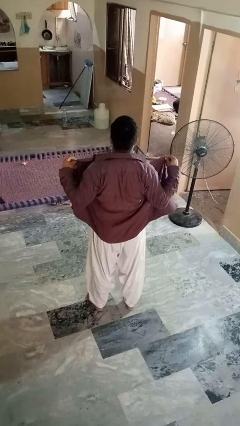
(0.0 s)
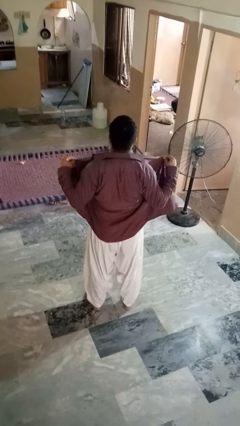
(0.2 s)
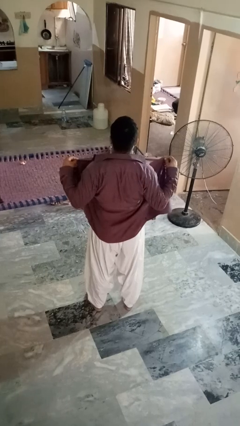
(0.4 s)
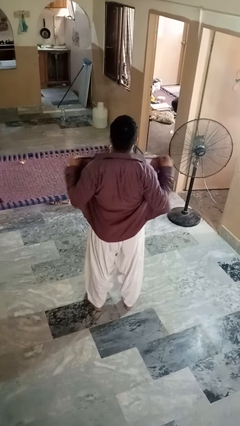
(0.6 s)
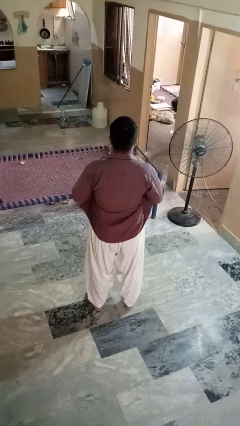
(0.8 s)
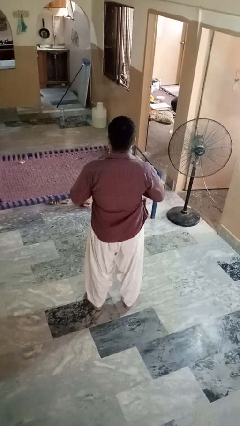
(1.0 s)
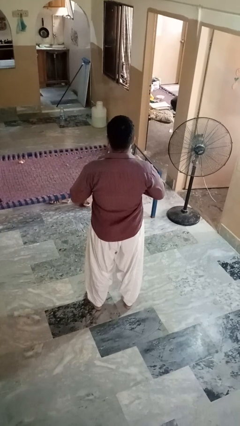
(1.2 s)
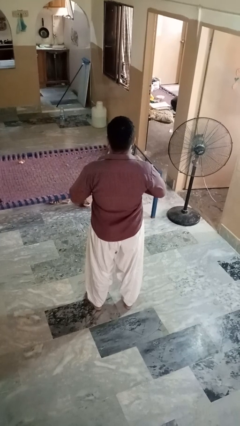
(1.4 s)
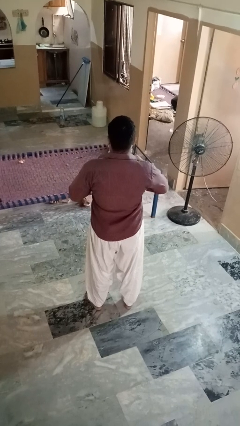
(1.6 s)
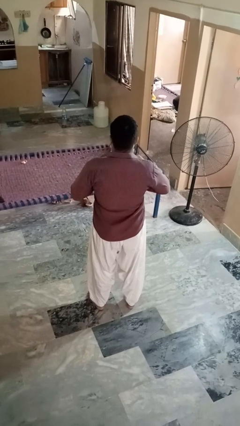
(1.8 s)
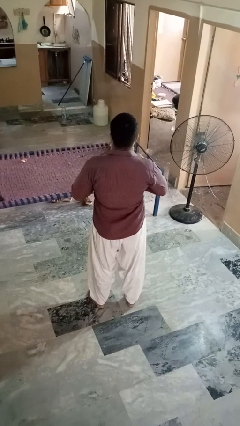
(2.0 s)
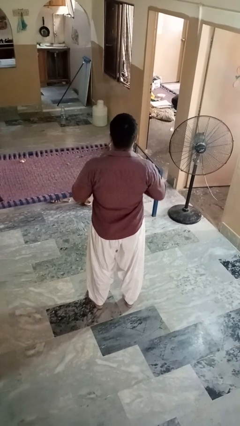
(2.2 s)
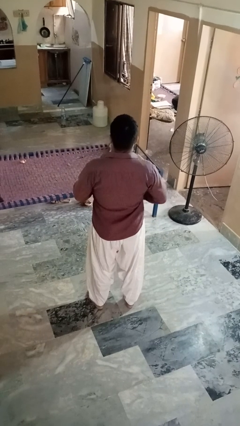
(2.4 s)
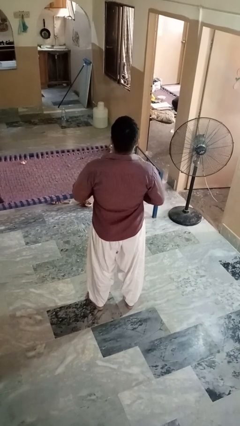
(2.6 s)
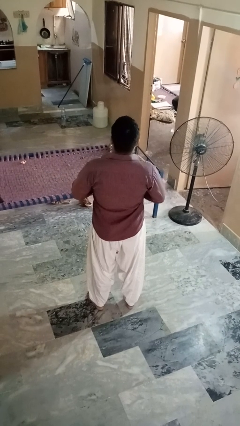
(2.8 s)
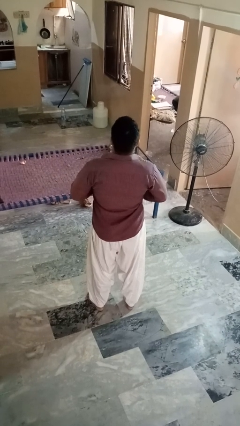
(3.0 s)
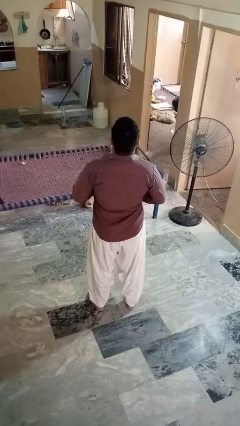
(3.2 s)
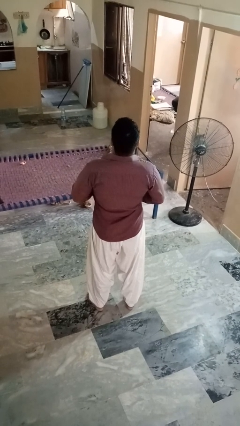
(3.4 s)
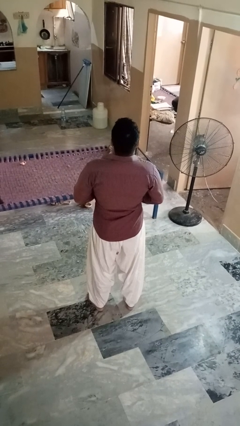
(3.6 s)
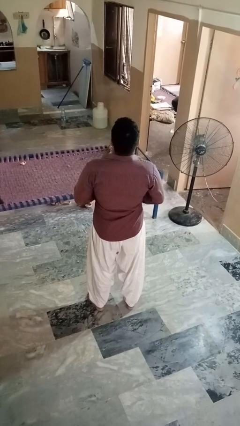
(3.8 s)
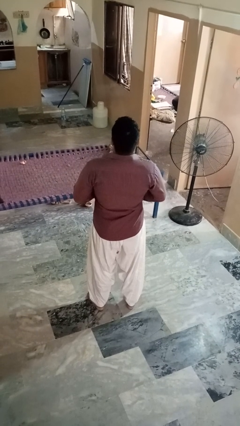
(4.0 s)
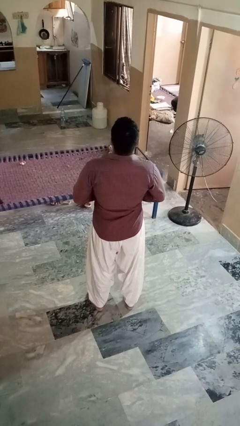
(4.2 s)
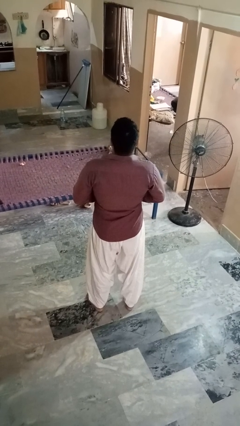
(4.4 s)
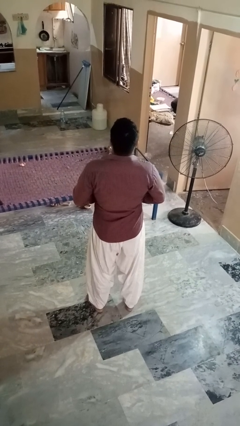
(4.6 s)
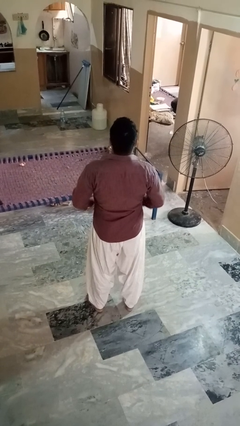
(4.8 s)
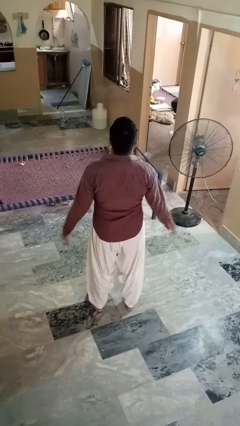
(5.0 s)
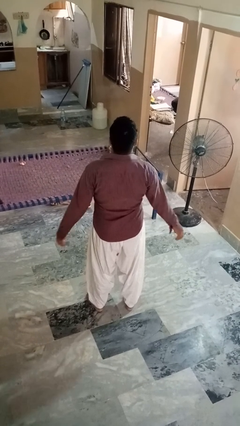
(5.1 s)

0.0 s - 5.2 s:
person buttons shirt

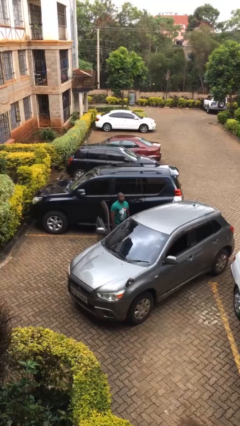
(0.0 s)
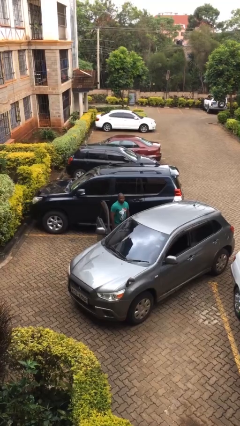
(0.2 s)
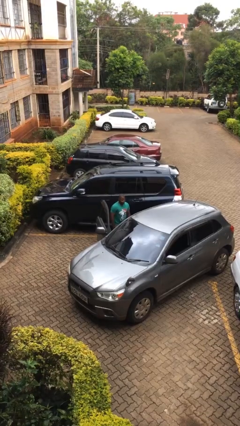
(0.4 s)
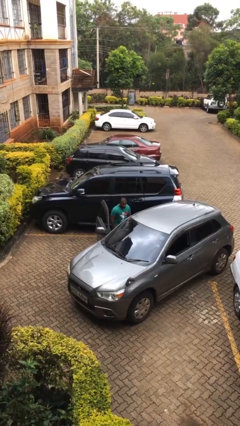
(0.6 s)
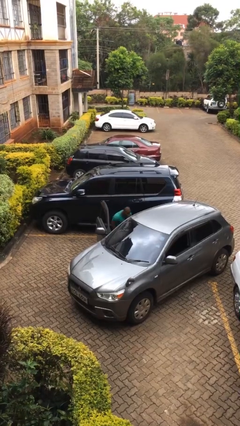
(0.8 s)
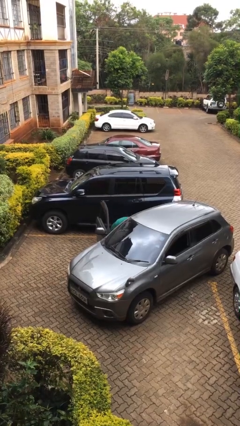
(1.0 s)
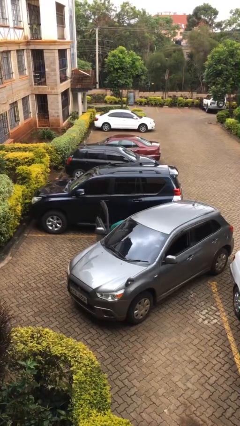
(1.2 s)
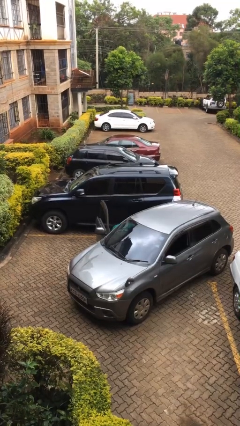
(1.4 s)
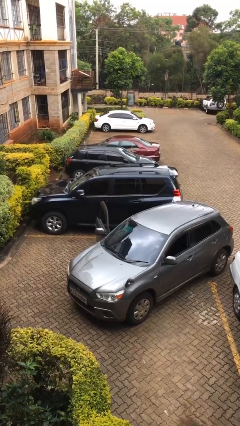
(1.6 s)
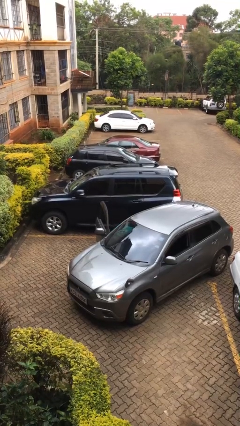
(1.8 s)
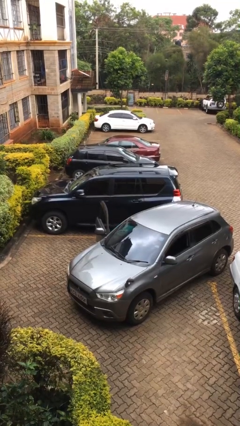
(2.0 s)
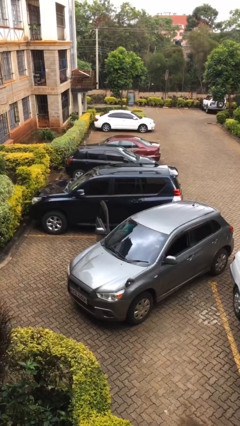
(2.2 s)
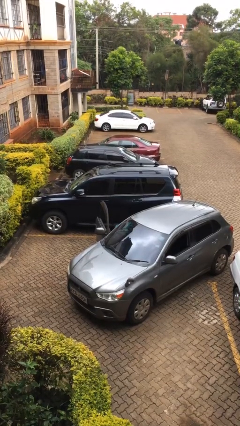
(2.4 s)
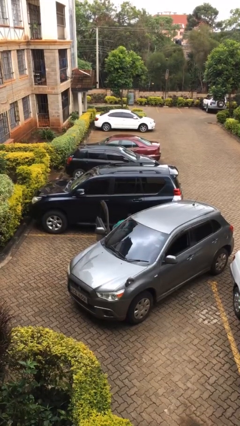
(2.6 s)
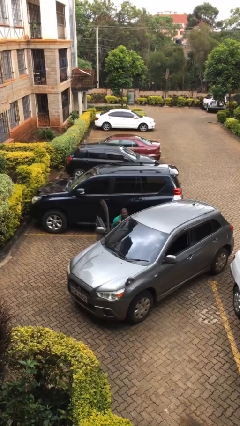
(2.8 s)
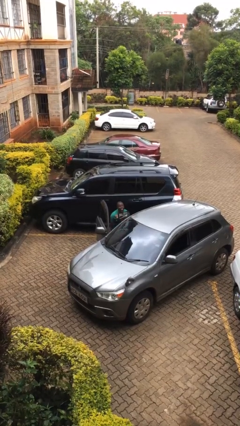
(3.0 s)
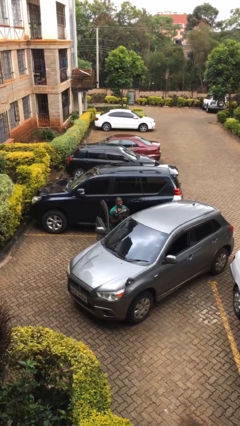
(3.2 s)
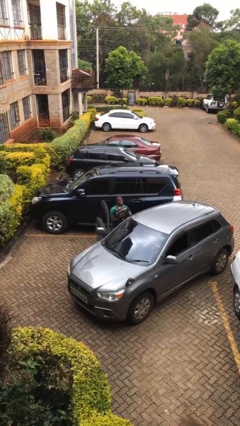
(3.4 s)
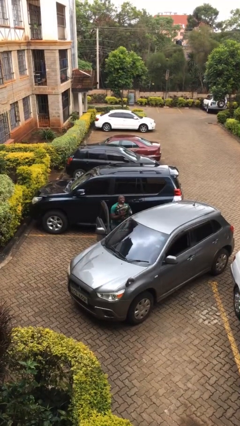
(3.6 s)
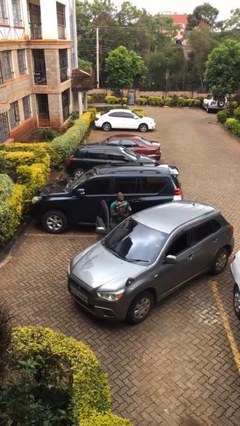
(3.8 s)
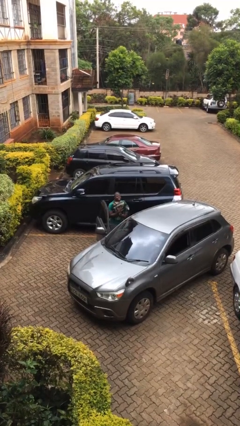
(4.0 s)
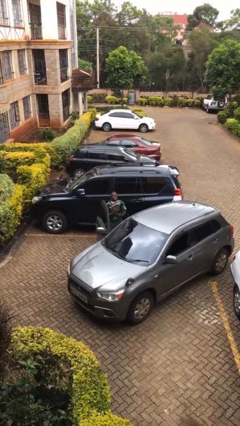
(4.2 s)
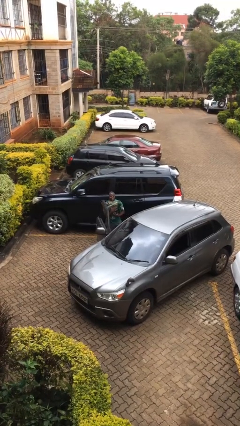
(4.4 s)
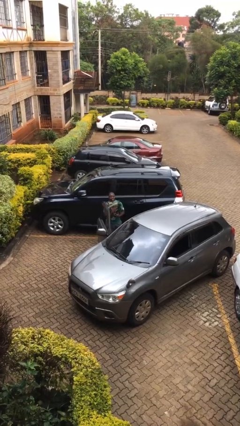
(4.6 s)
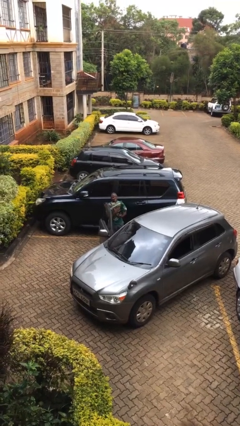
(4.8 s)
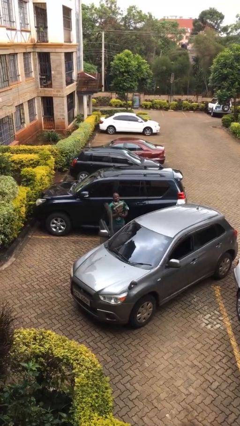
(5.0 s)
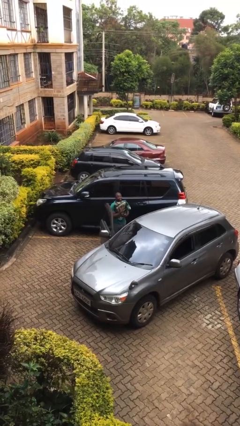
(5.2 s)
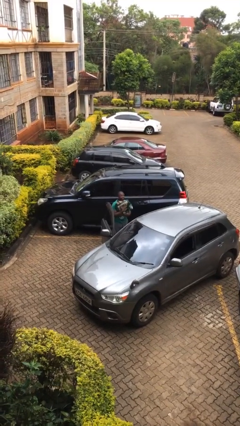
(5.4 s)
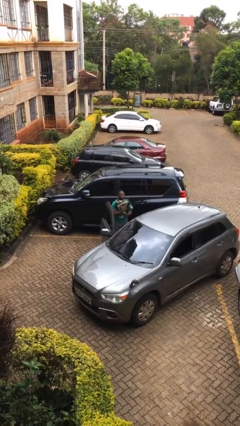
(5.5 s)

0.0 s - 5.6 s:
person unloads car

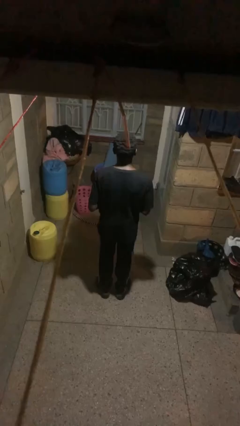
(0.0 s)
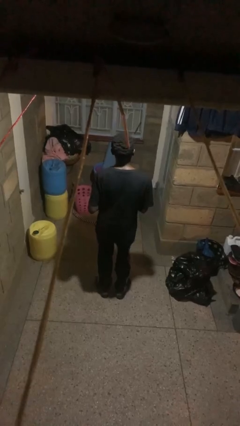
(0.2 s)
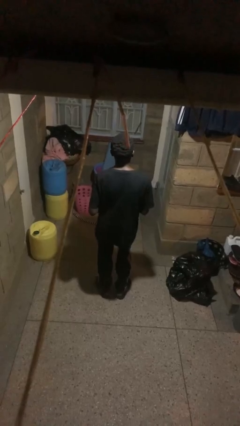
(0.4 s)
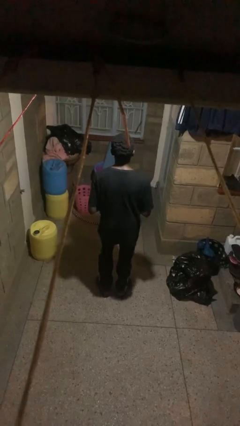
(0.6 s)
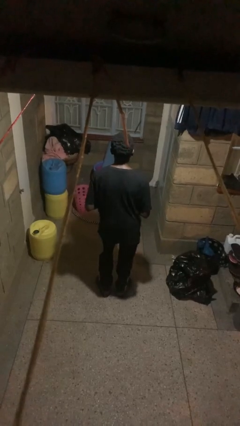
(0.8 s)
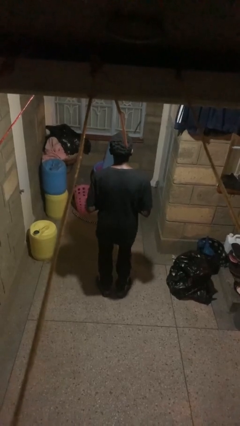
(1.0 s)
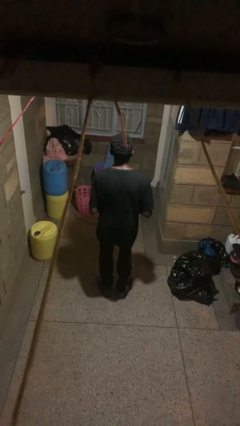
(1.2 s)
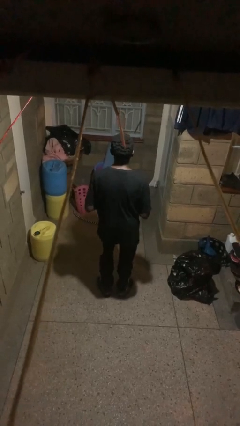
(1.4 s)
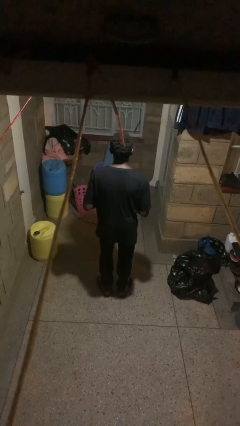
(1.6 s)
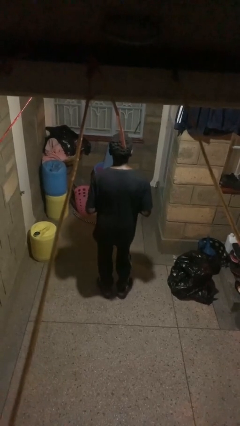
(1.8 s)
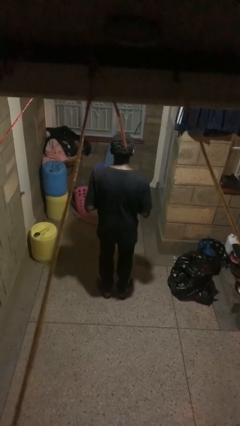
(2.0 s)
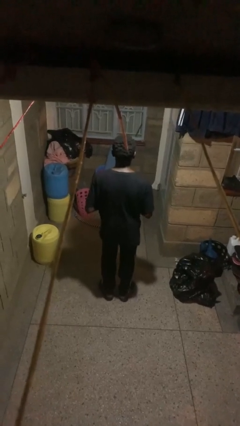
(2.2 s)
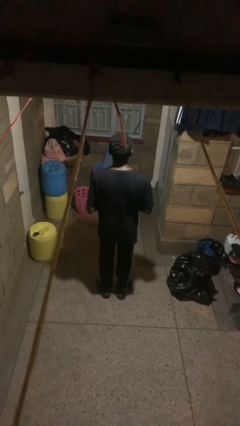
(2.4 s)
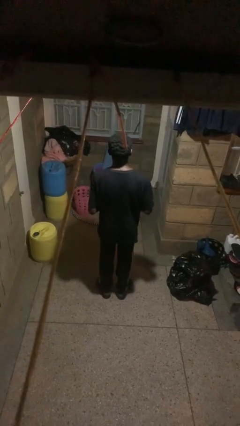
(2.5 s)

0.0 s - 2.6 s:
person wiggles hips

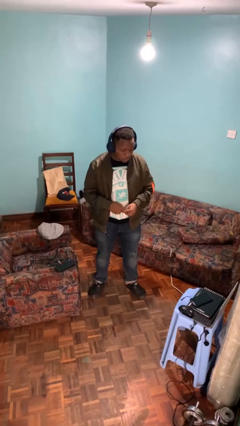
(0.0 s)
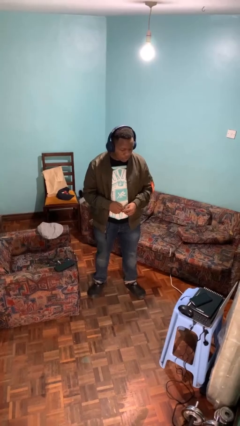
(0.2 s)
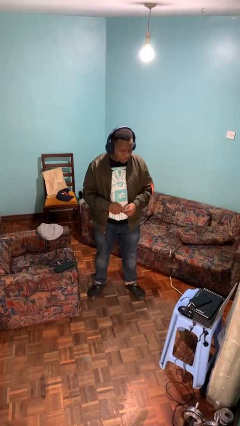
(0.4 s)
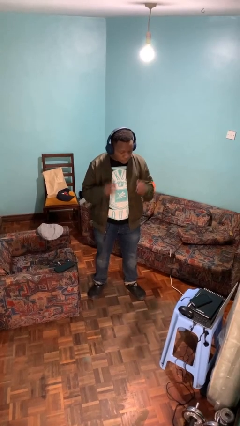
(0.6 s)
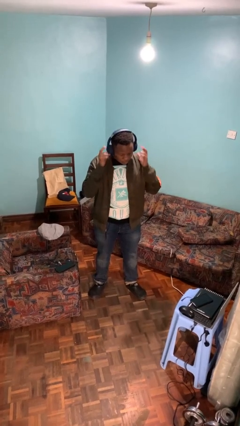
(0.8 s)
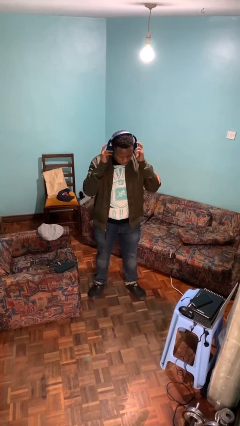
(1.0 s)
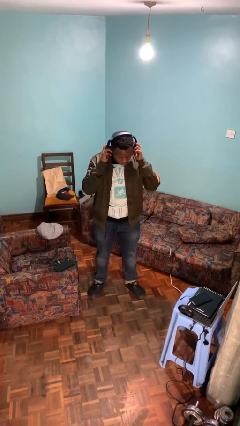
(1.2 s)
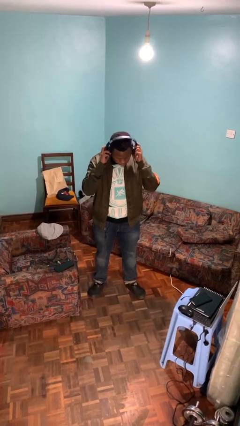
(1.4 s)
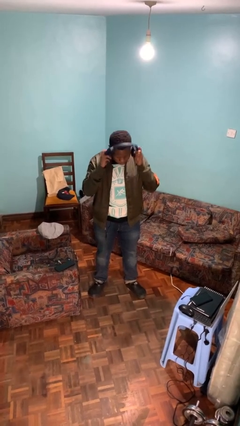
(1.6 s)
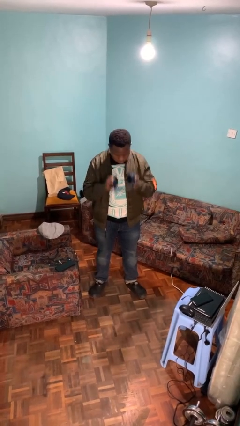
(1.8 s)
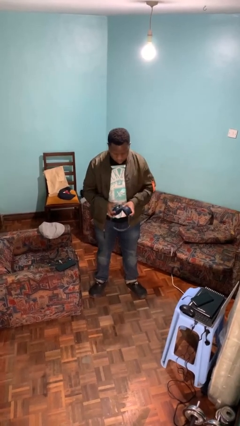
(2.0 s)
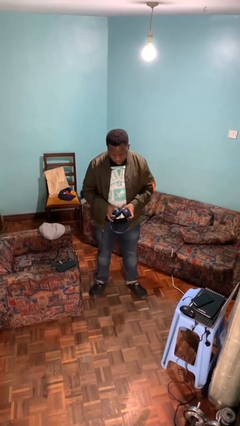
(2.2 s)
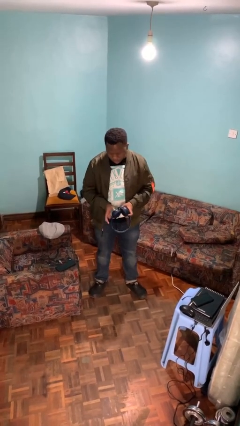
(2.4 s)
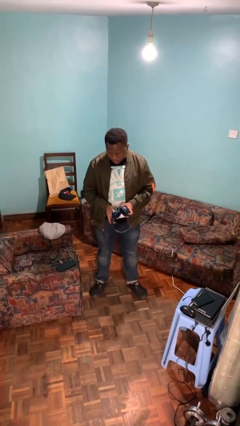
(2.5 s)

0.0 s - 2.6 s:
person takes off headphones

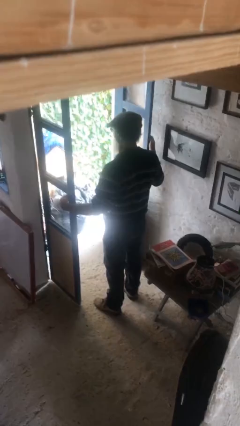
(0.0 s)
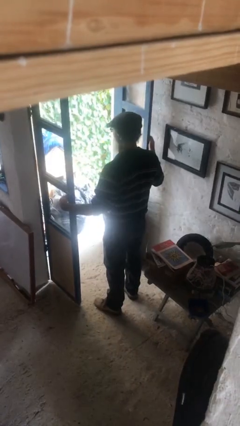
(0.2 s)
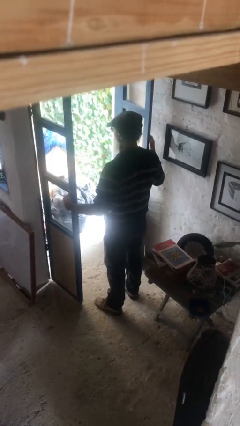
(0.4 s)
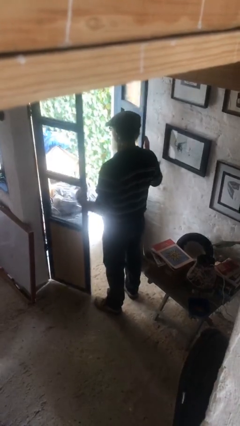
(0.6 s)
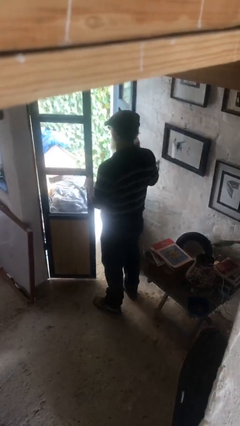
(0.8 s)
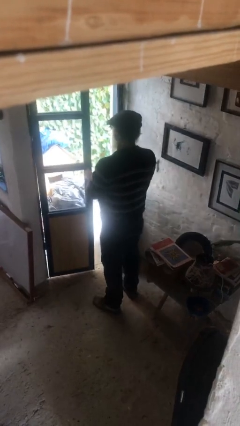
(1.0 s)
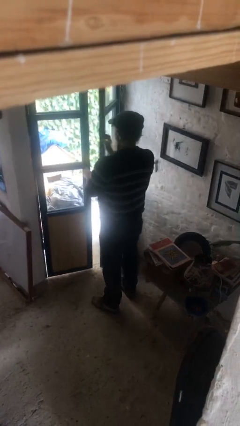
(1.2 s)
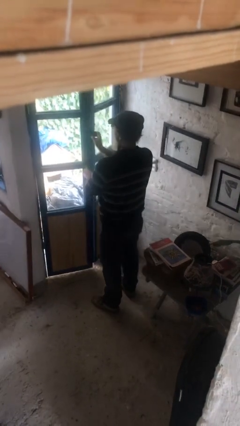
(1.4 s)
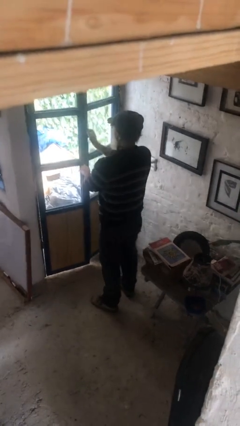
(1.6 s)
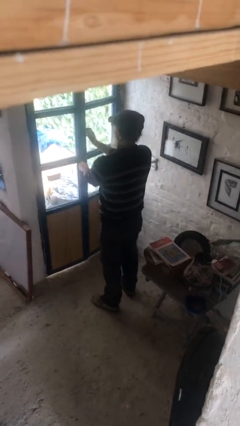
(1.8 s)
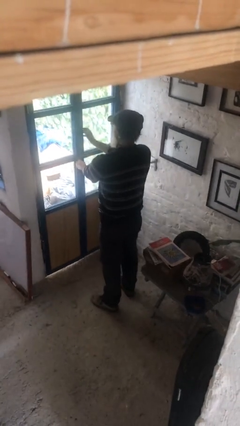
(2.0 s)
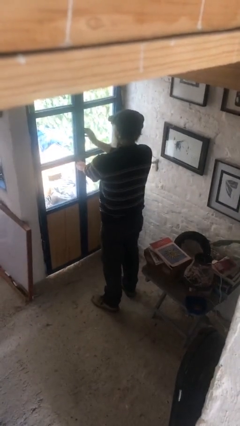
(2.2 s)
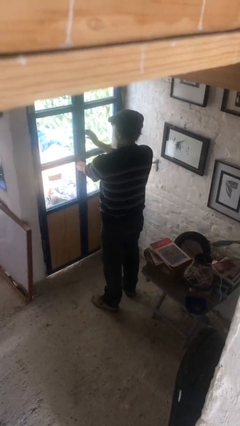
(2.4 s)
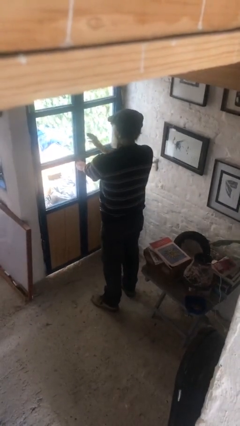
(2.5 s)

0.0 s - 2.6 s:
person closes facility door
